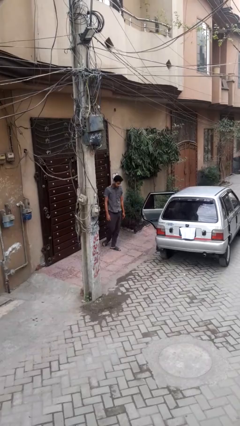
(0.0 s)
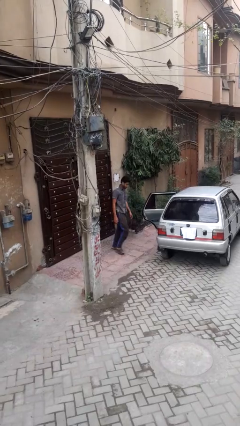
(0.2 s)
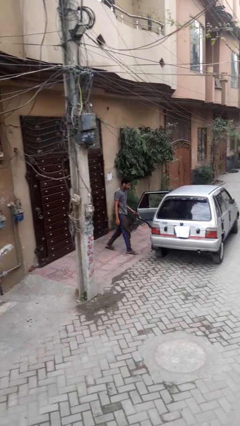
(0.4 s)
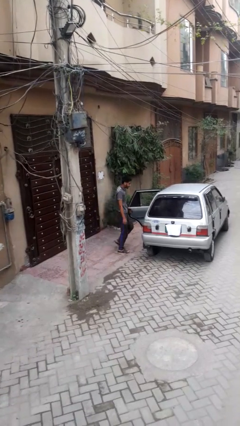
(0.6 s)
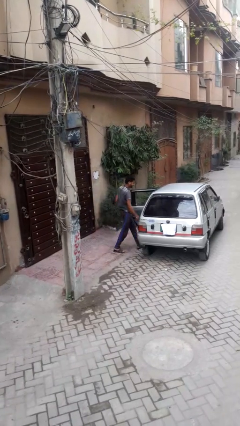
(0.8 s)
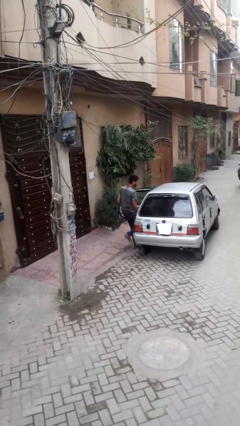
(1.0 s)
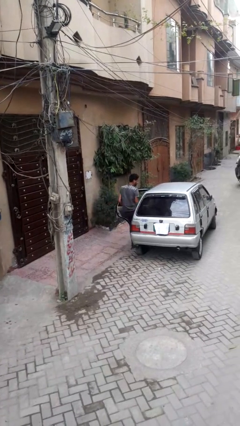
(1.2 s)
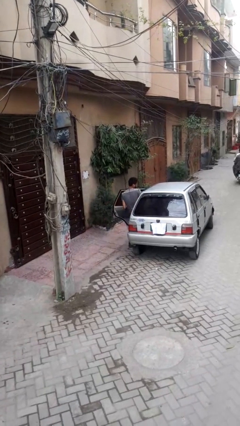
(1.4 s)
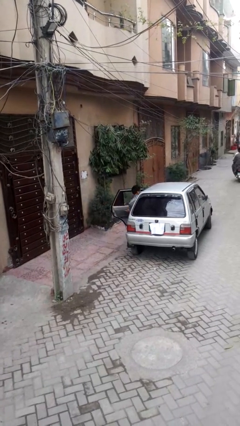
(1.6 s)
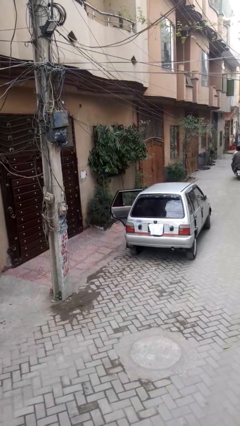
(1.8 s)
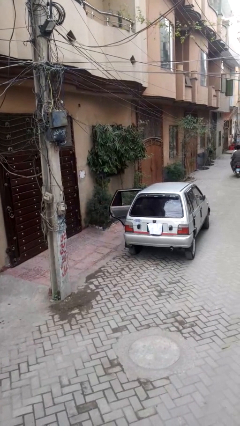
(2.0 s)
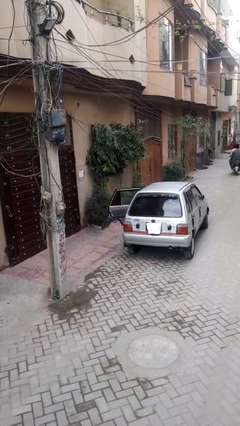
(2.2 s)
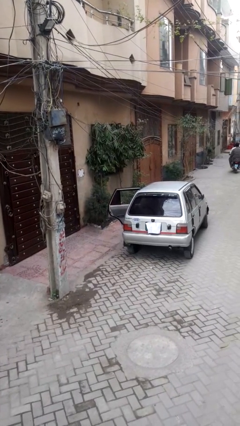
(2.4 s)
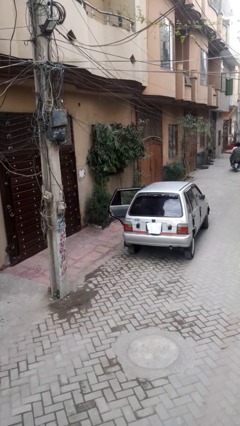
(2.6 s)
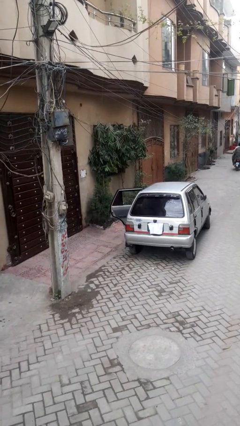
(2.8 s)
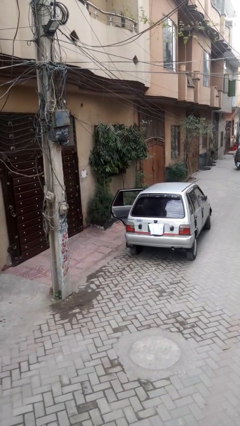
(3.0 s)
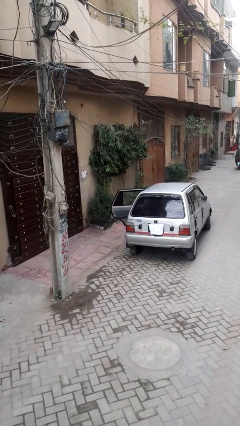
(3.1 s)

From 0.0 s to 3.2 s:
person enters car

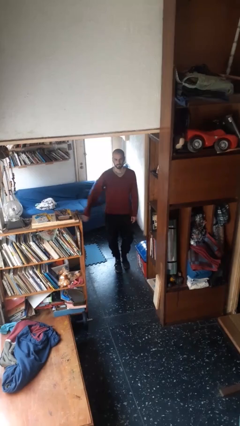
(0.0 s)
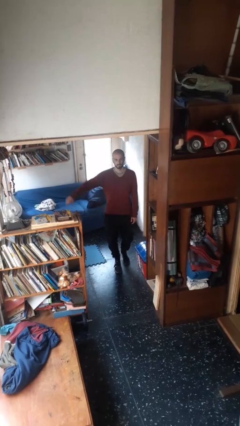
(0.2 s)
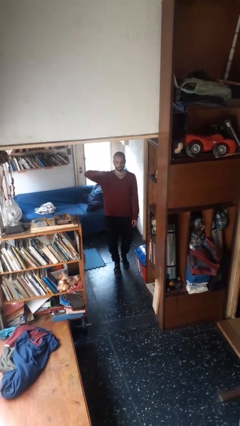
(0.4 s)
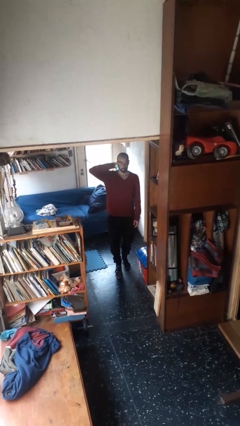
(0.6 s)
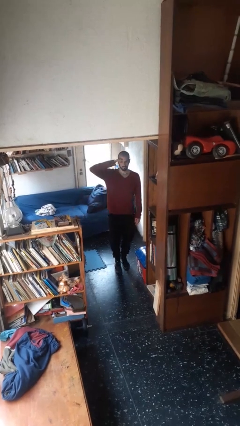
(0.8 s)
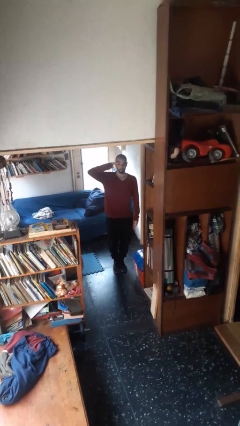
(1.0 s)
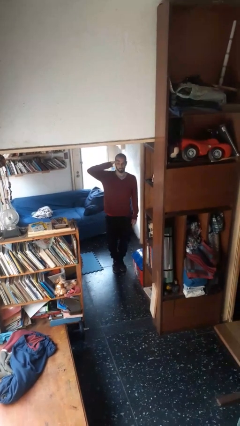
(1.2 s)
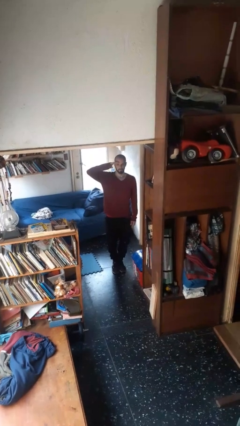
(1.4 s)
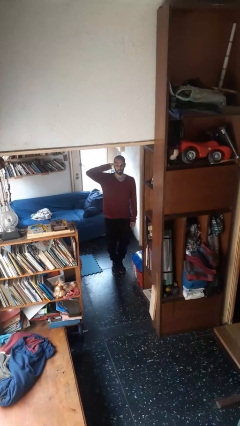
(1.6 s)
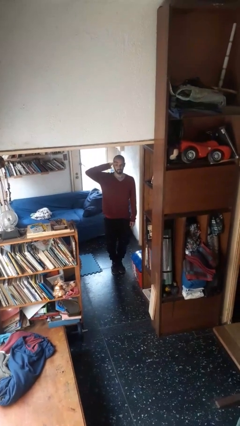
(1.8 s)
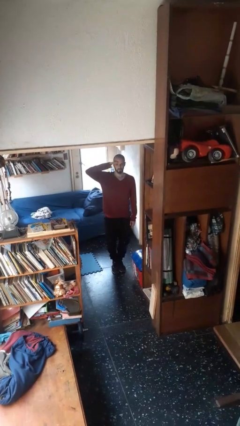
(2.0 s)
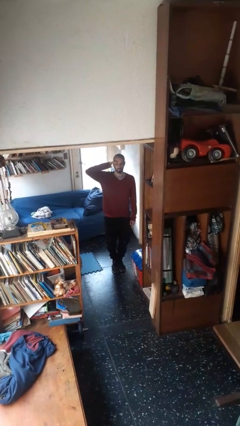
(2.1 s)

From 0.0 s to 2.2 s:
person salutes

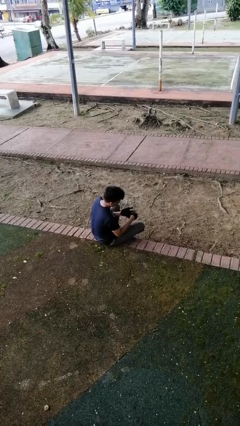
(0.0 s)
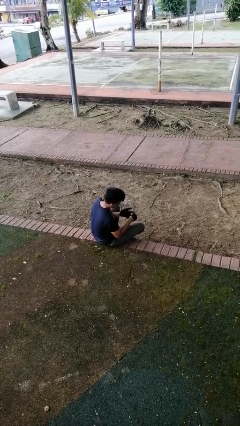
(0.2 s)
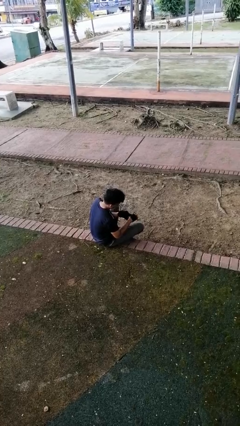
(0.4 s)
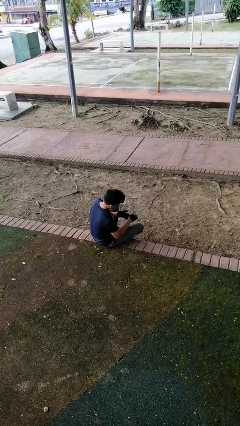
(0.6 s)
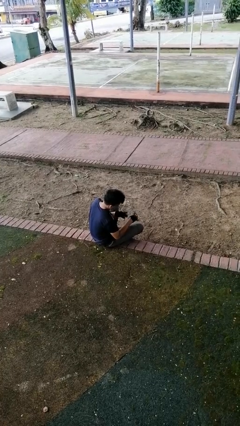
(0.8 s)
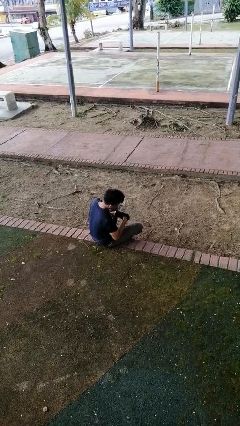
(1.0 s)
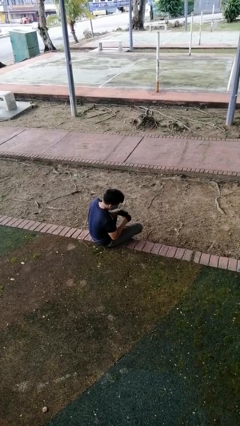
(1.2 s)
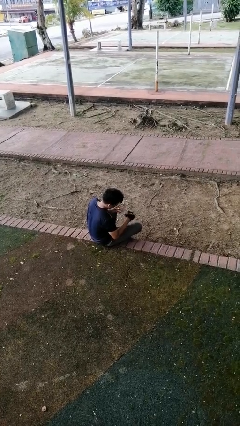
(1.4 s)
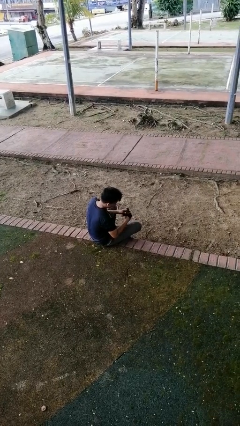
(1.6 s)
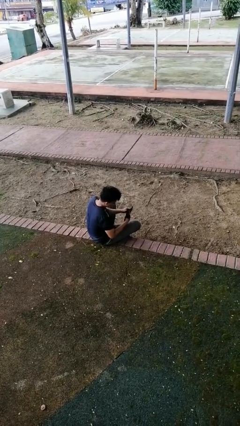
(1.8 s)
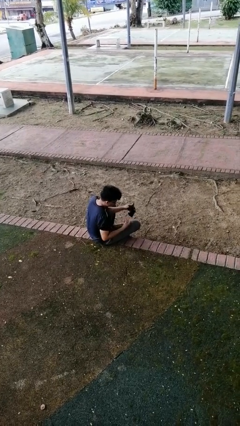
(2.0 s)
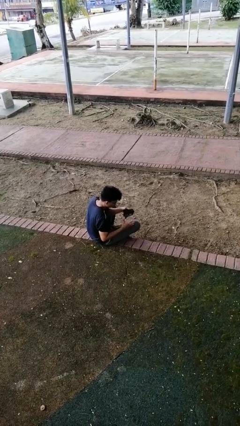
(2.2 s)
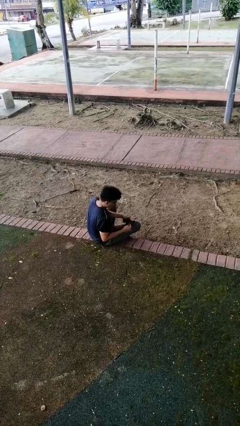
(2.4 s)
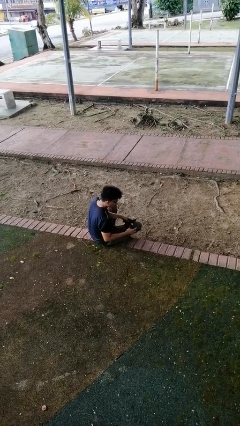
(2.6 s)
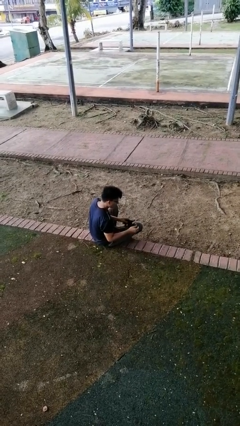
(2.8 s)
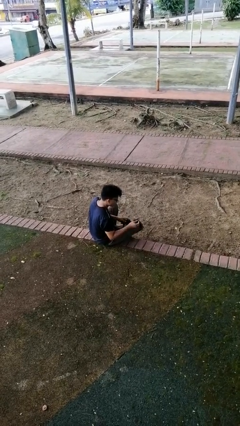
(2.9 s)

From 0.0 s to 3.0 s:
person takes off gloves

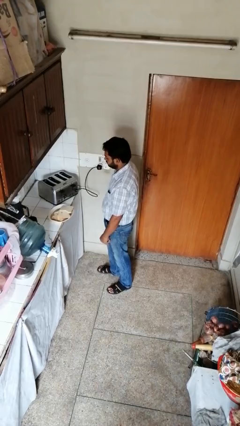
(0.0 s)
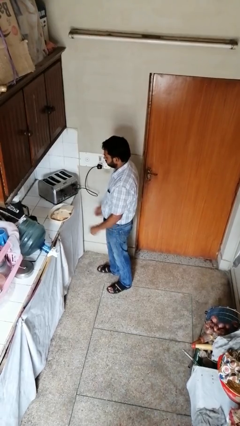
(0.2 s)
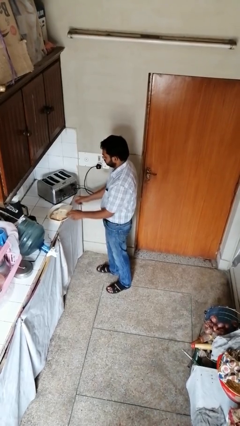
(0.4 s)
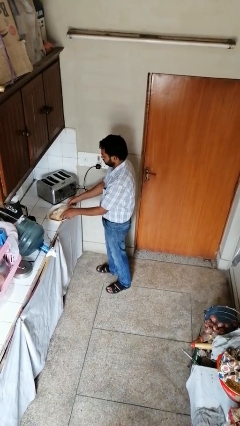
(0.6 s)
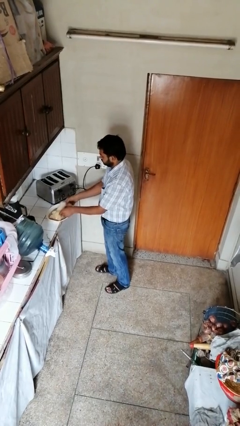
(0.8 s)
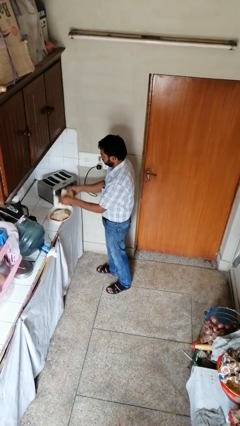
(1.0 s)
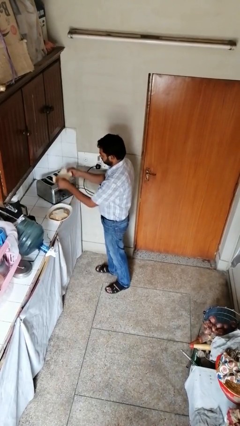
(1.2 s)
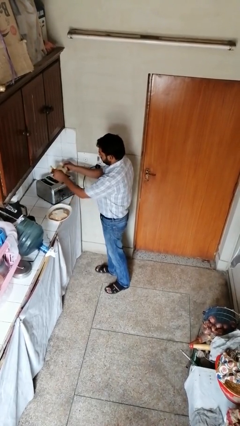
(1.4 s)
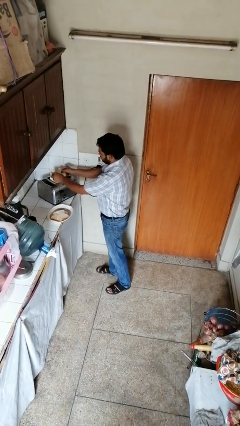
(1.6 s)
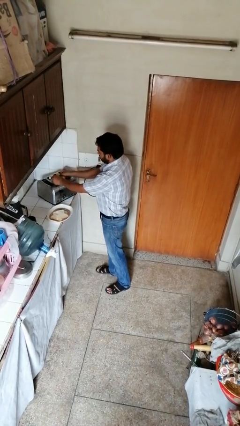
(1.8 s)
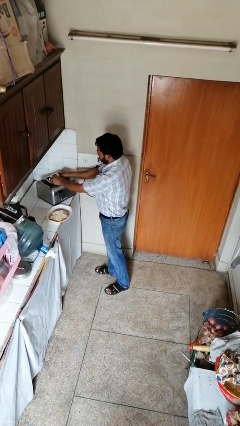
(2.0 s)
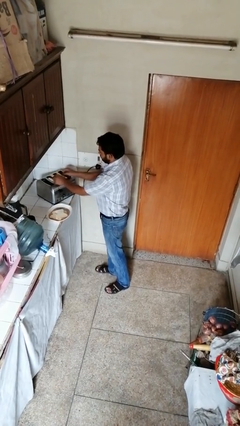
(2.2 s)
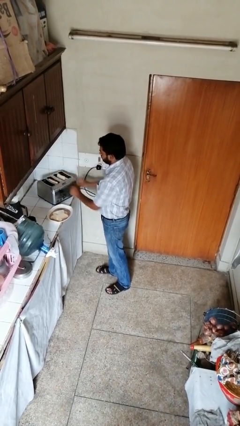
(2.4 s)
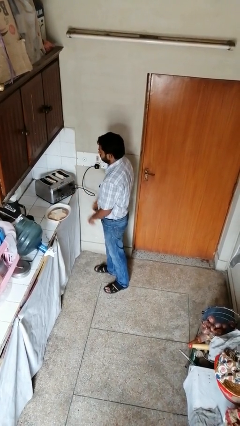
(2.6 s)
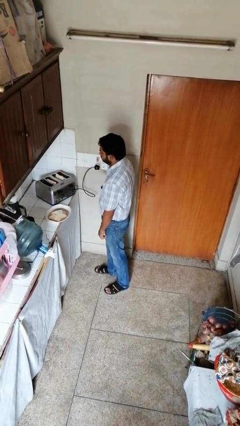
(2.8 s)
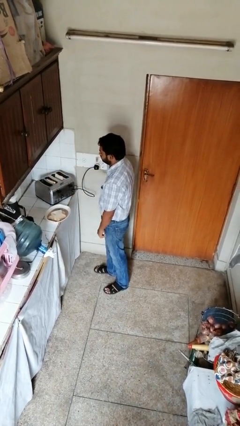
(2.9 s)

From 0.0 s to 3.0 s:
person puts object into toaster

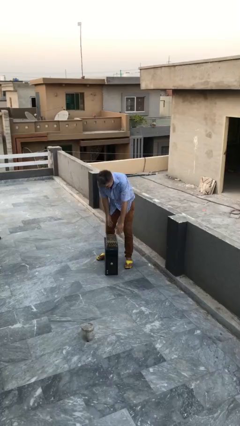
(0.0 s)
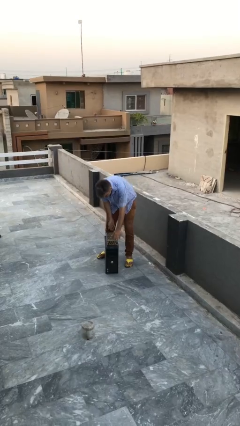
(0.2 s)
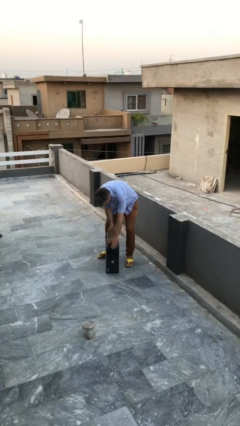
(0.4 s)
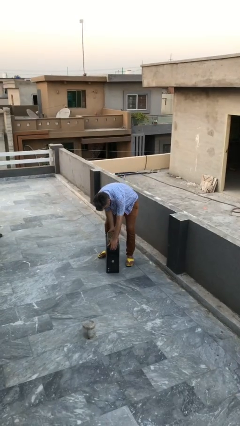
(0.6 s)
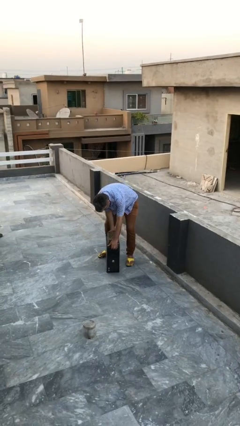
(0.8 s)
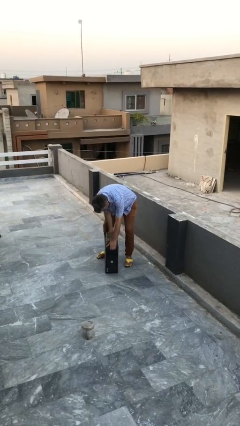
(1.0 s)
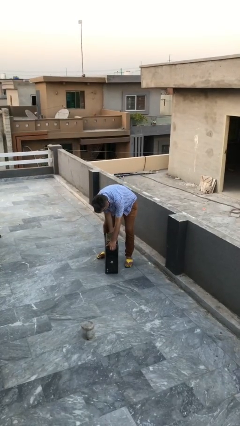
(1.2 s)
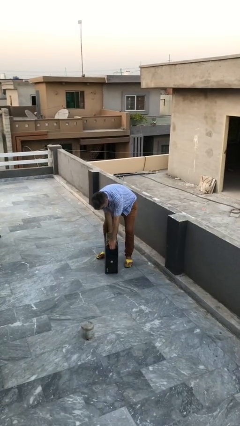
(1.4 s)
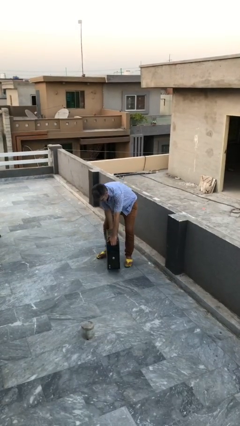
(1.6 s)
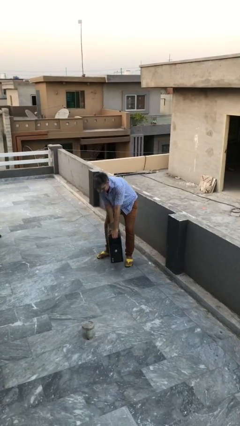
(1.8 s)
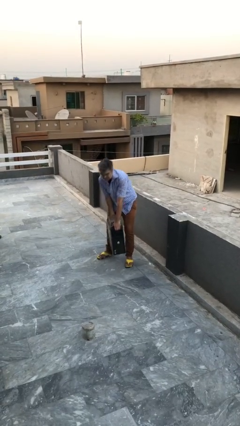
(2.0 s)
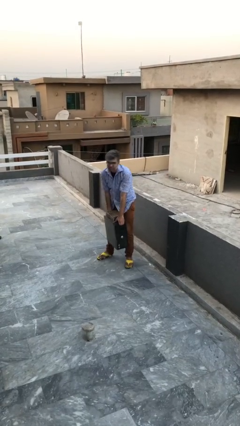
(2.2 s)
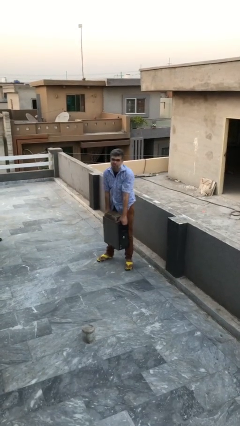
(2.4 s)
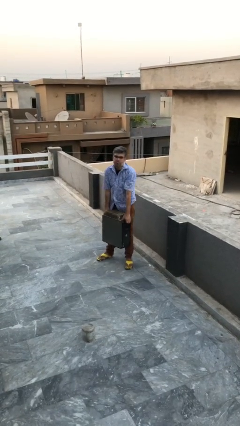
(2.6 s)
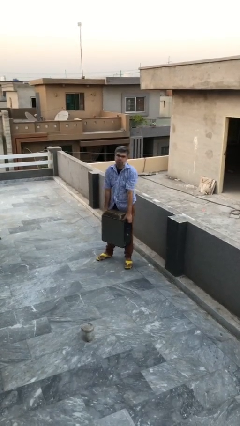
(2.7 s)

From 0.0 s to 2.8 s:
person picks up object from floor

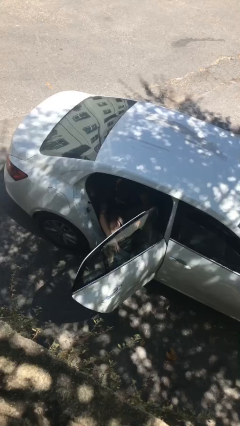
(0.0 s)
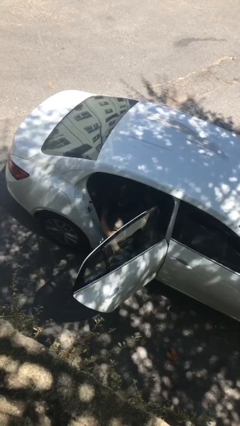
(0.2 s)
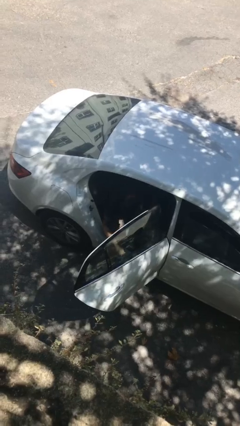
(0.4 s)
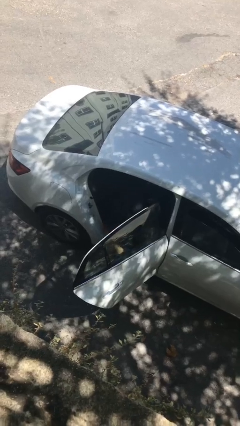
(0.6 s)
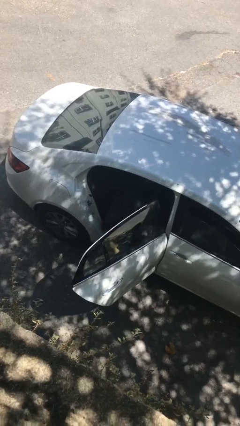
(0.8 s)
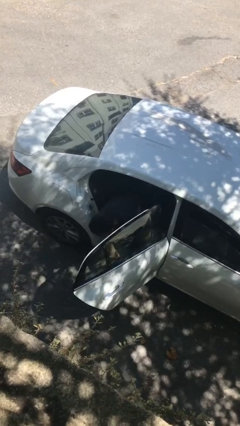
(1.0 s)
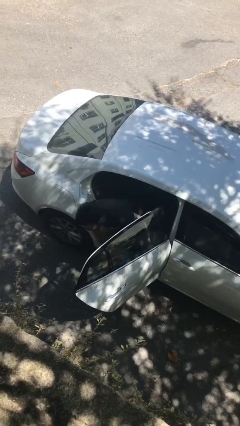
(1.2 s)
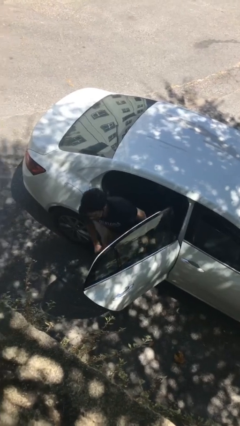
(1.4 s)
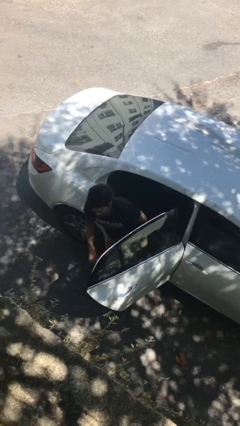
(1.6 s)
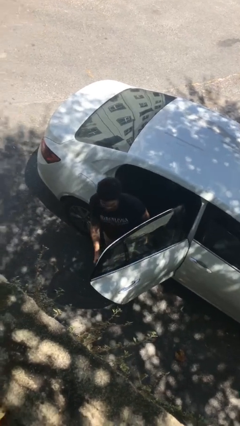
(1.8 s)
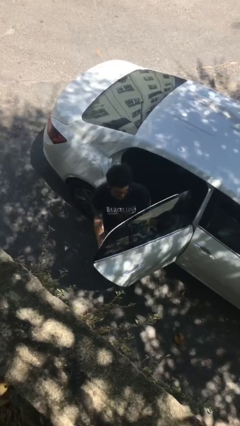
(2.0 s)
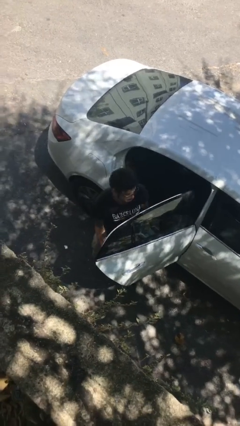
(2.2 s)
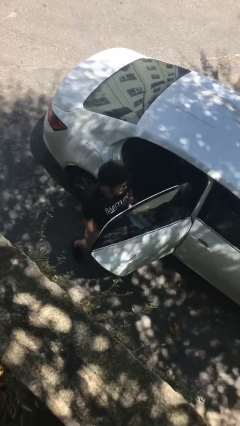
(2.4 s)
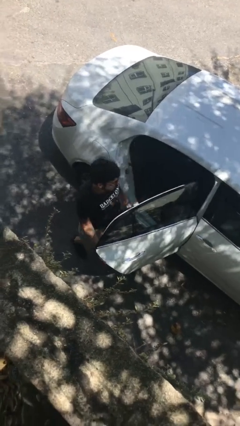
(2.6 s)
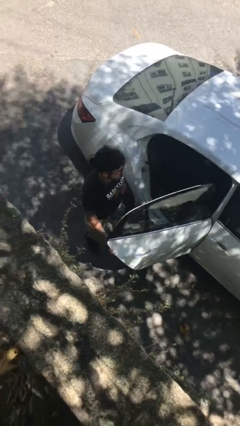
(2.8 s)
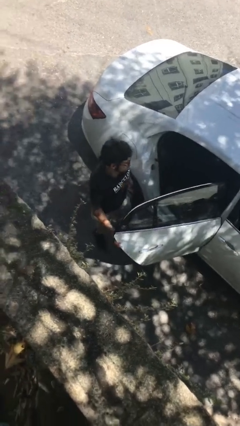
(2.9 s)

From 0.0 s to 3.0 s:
person exits car

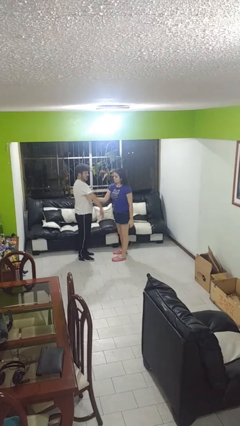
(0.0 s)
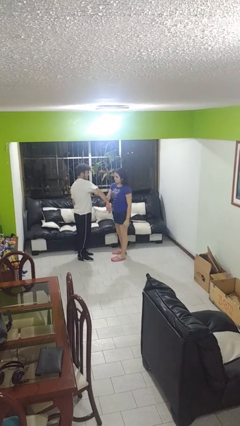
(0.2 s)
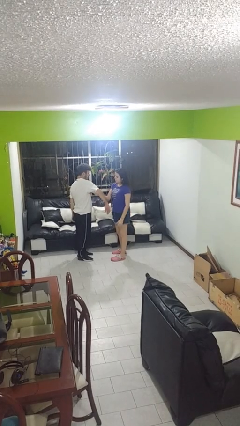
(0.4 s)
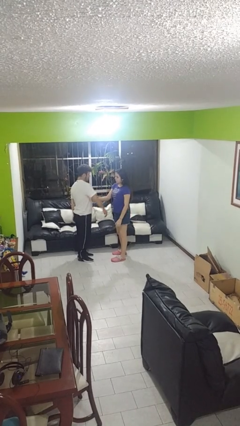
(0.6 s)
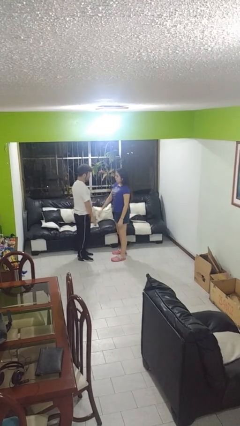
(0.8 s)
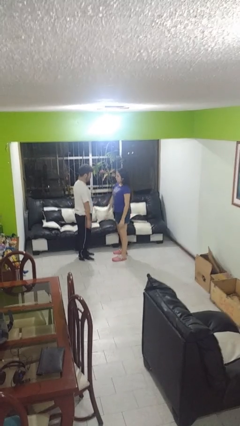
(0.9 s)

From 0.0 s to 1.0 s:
person grabs person by bicep
